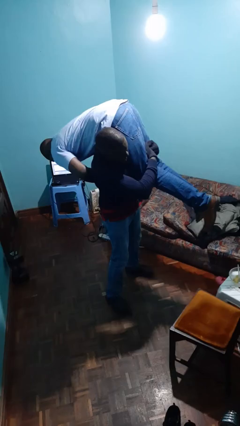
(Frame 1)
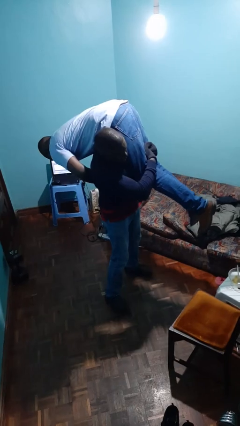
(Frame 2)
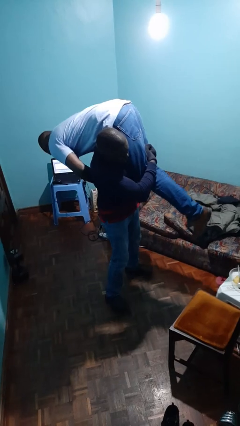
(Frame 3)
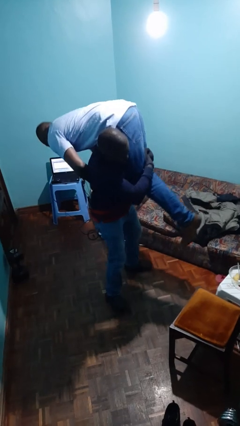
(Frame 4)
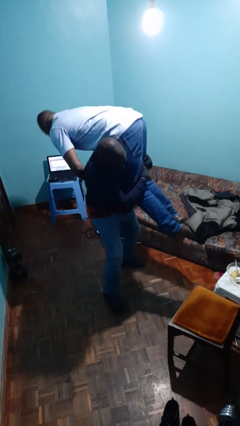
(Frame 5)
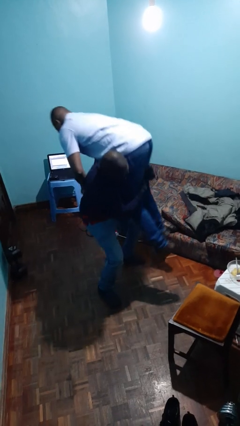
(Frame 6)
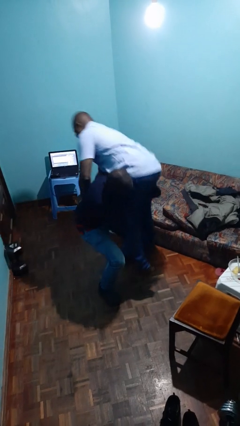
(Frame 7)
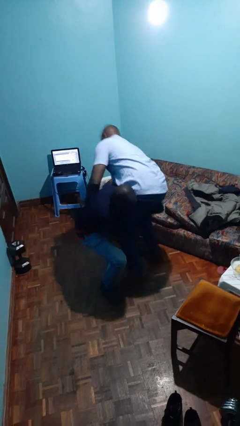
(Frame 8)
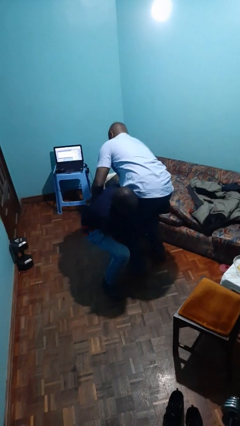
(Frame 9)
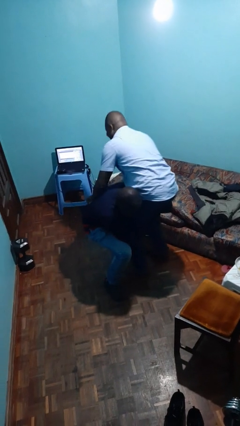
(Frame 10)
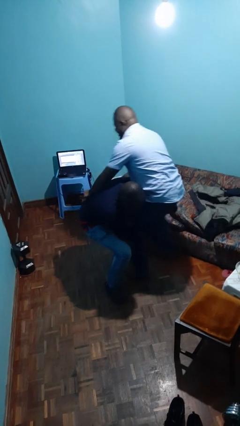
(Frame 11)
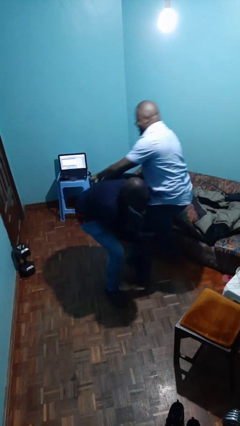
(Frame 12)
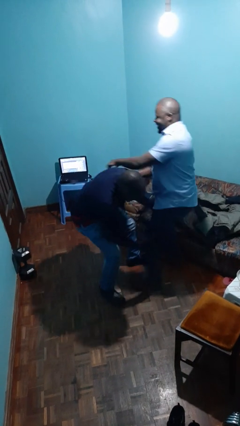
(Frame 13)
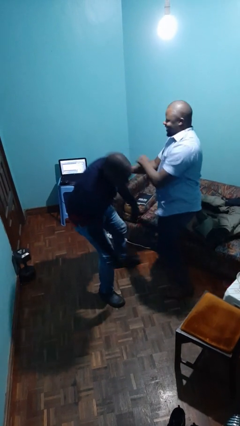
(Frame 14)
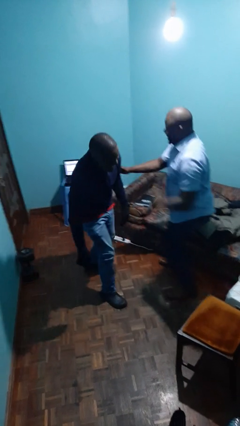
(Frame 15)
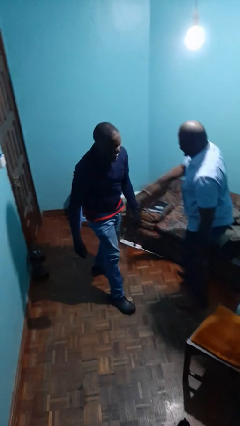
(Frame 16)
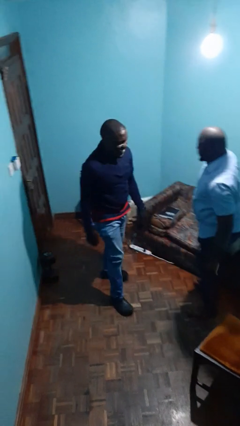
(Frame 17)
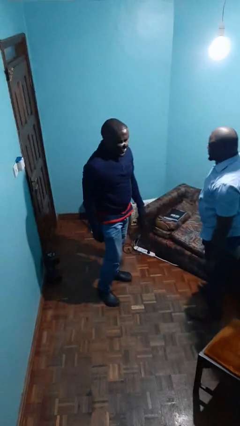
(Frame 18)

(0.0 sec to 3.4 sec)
person puts down person

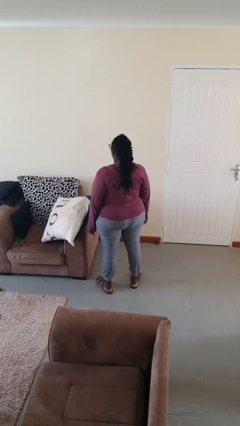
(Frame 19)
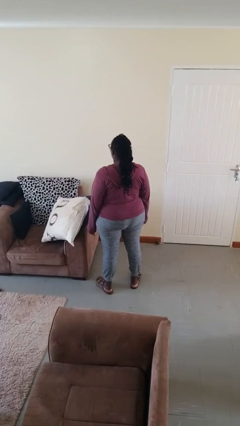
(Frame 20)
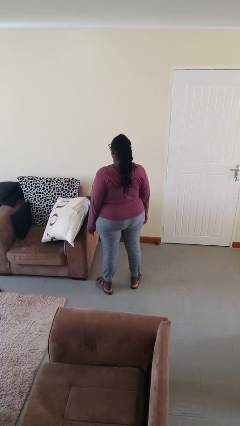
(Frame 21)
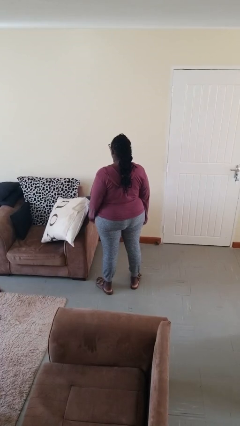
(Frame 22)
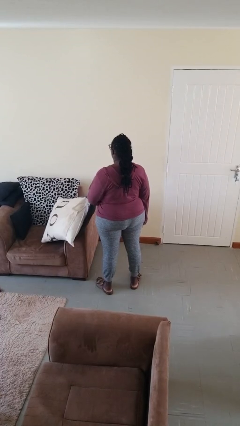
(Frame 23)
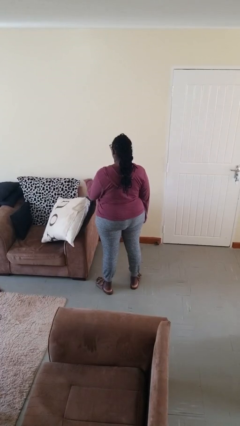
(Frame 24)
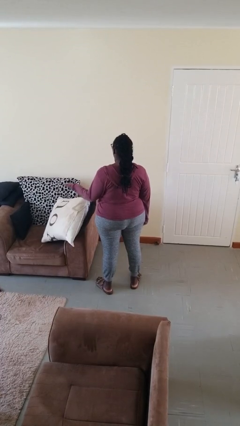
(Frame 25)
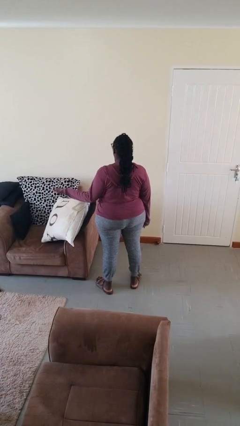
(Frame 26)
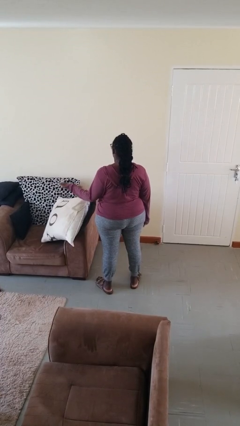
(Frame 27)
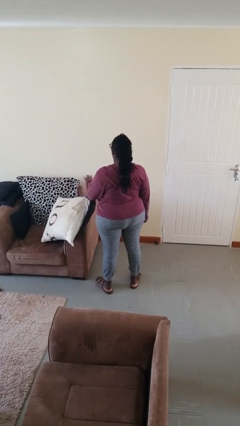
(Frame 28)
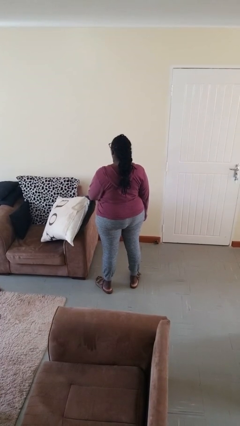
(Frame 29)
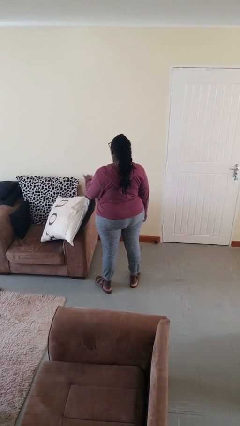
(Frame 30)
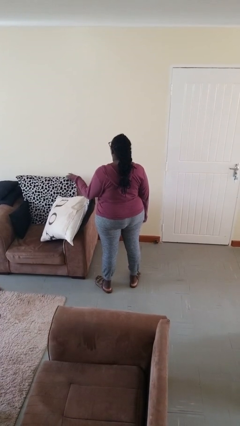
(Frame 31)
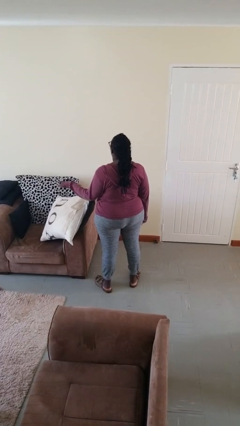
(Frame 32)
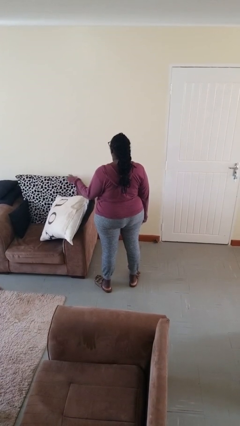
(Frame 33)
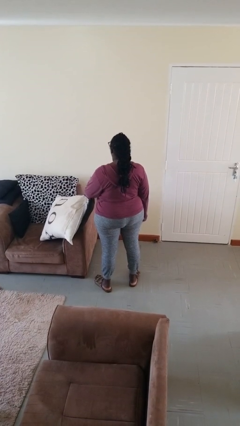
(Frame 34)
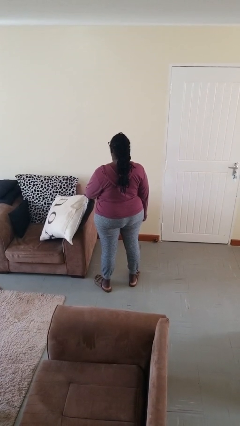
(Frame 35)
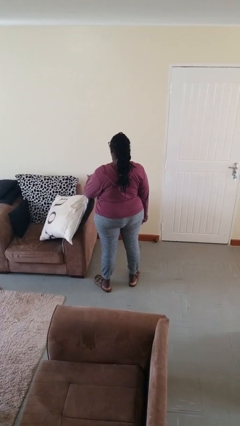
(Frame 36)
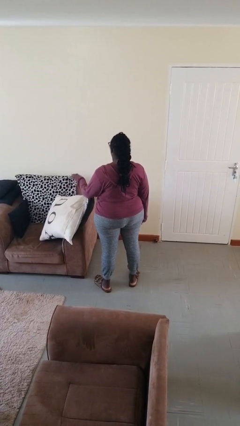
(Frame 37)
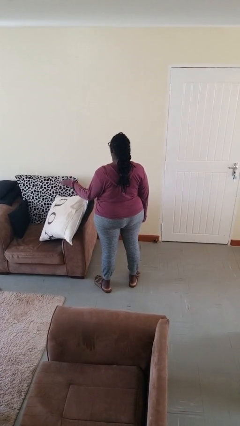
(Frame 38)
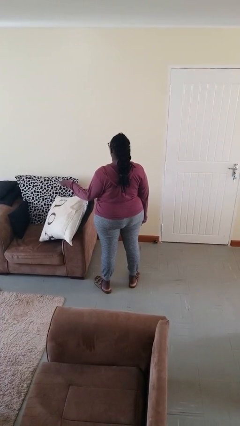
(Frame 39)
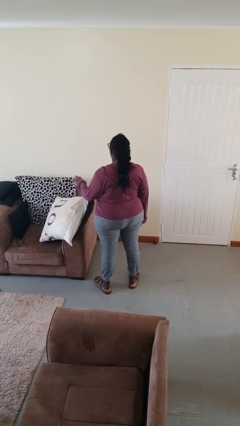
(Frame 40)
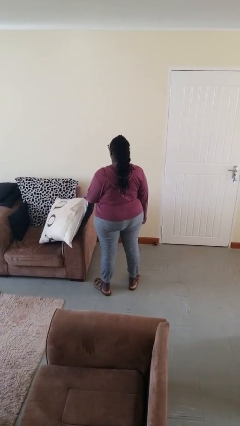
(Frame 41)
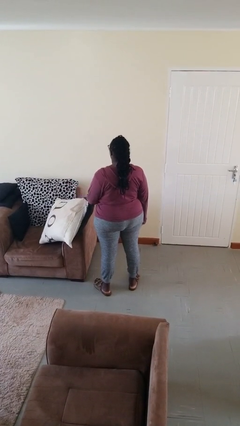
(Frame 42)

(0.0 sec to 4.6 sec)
person waves hand over object

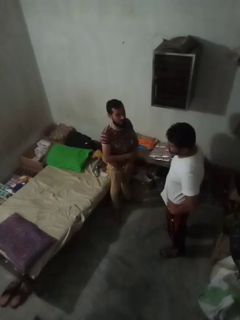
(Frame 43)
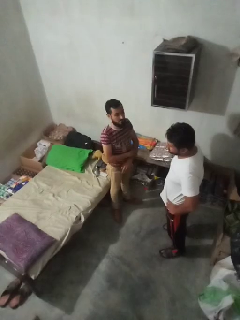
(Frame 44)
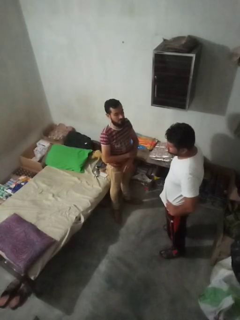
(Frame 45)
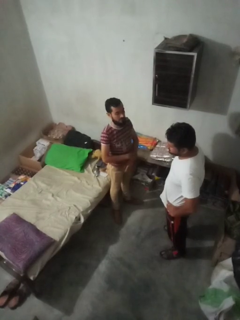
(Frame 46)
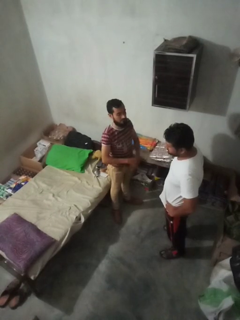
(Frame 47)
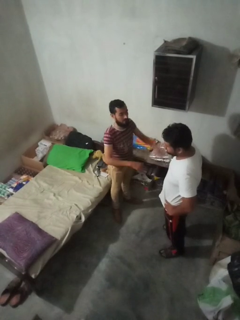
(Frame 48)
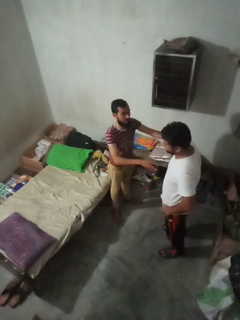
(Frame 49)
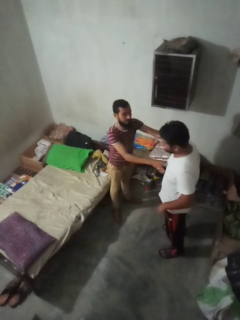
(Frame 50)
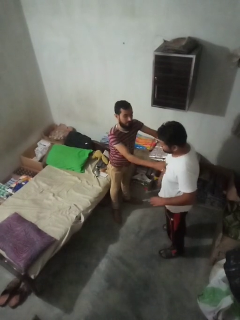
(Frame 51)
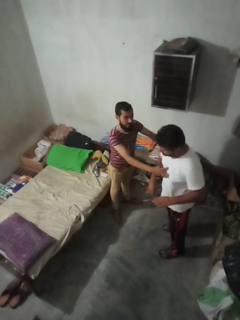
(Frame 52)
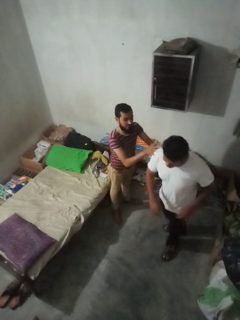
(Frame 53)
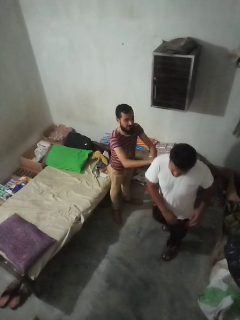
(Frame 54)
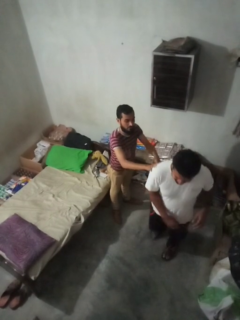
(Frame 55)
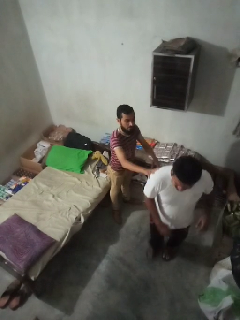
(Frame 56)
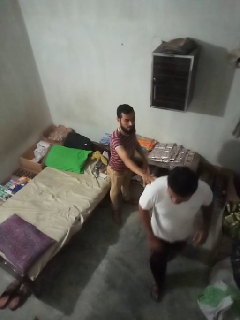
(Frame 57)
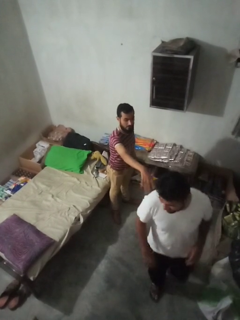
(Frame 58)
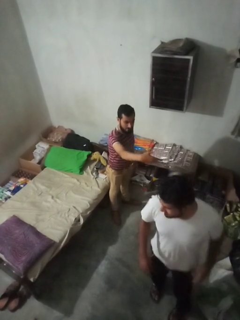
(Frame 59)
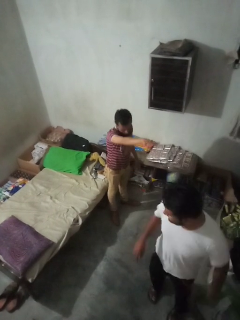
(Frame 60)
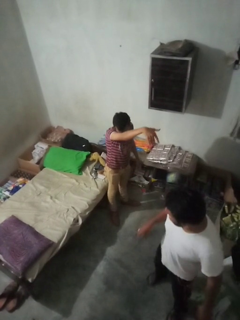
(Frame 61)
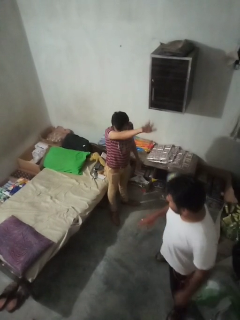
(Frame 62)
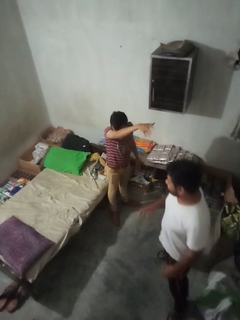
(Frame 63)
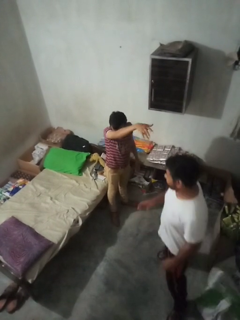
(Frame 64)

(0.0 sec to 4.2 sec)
person shoves person

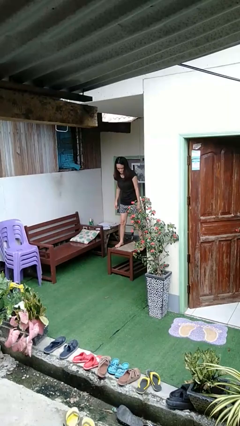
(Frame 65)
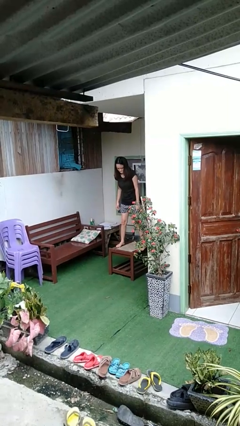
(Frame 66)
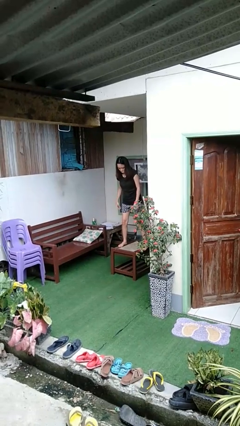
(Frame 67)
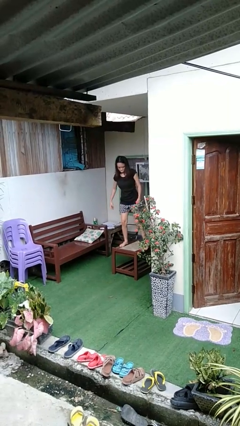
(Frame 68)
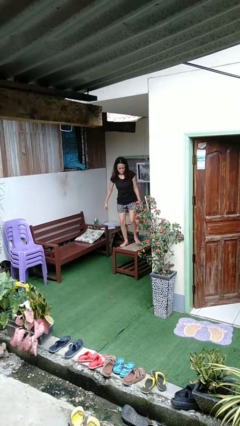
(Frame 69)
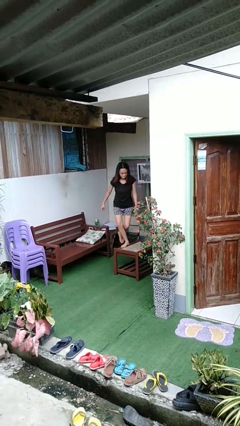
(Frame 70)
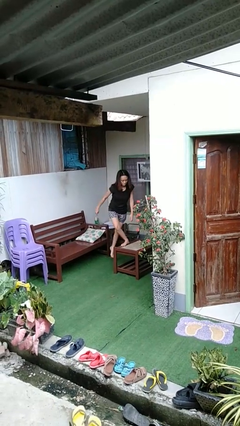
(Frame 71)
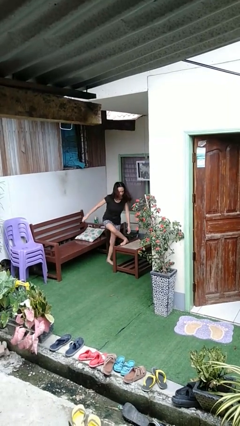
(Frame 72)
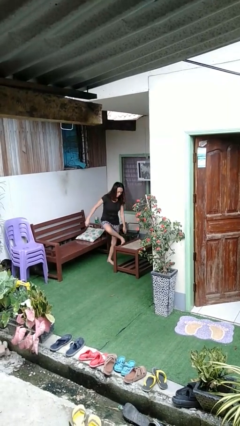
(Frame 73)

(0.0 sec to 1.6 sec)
person climbs off table

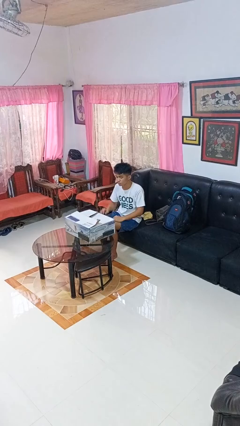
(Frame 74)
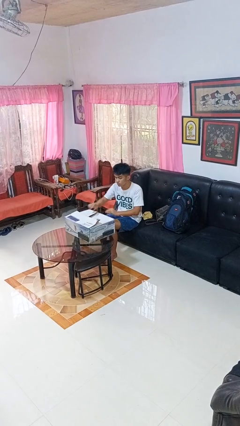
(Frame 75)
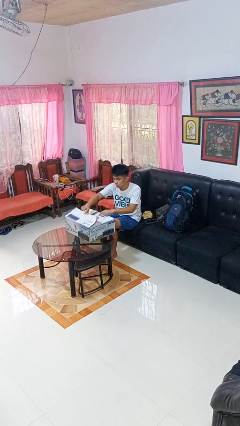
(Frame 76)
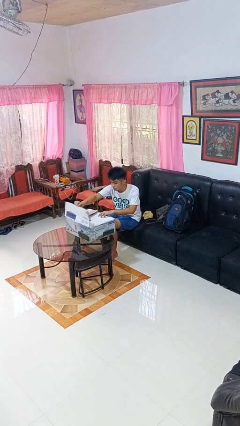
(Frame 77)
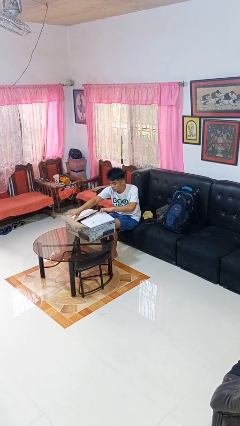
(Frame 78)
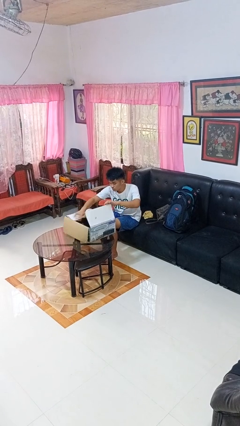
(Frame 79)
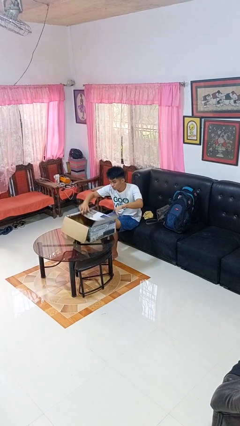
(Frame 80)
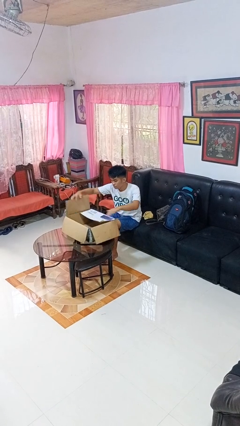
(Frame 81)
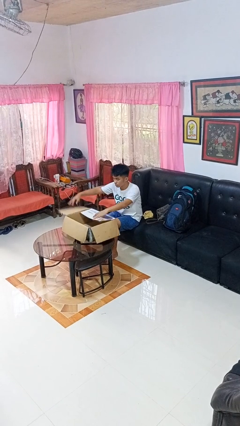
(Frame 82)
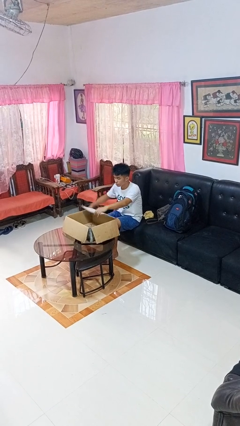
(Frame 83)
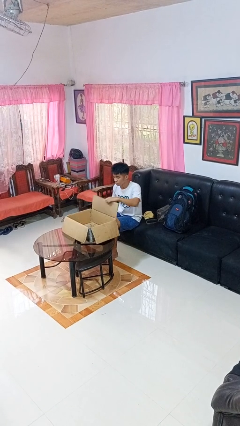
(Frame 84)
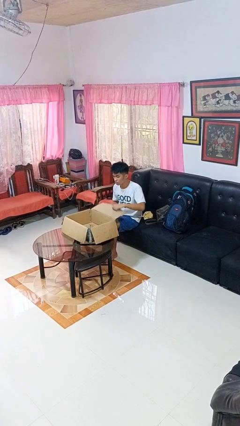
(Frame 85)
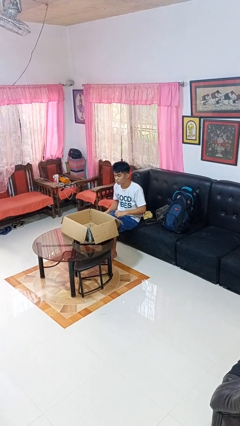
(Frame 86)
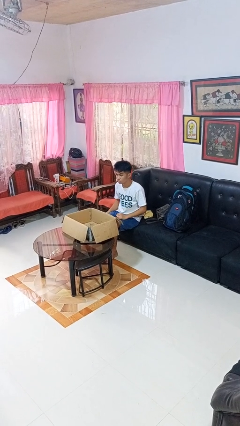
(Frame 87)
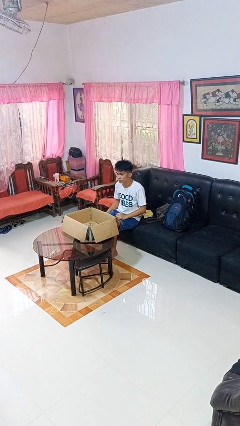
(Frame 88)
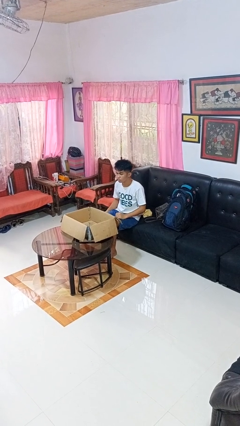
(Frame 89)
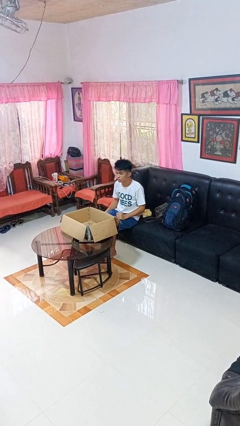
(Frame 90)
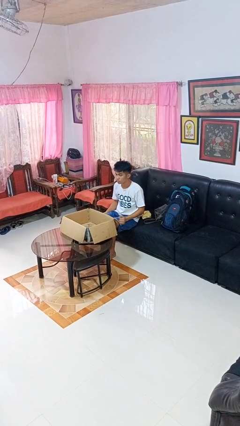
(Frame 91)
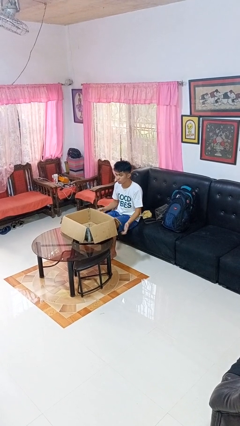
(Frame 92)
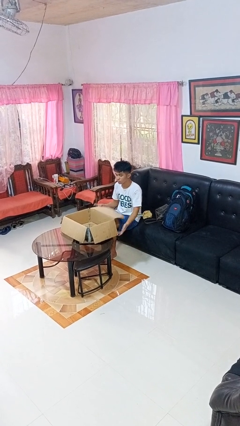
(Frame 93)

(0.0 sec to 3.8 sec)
person opens box

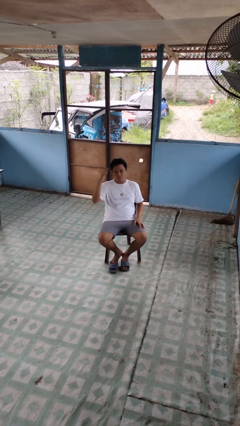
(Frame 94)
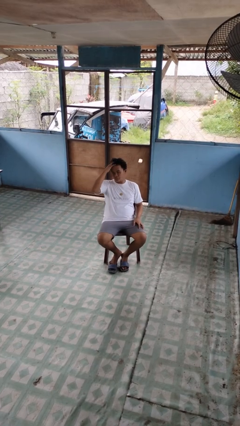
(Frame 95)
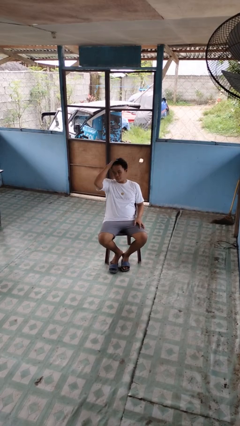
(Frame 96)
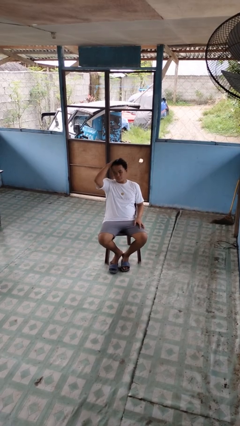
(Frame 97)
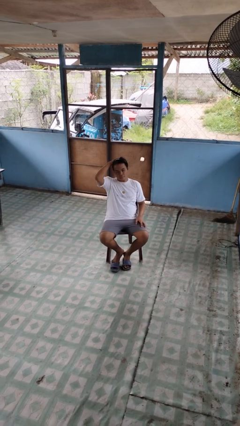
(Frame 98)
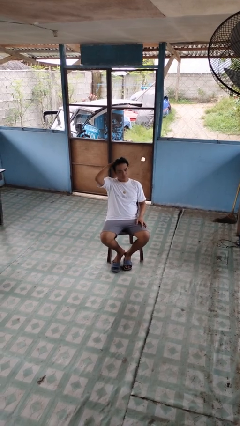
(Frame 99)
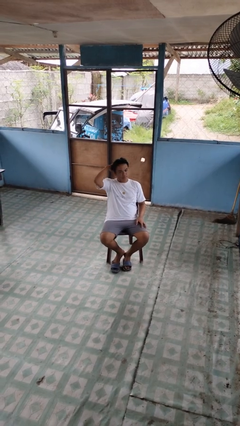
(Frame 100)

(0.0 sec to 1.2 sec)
person strokes hair
